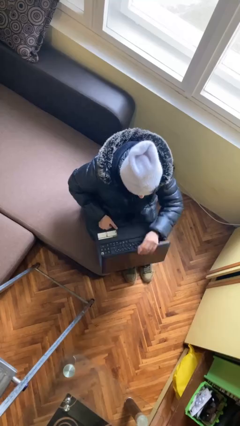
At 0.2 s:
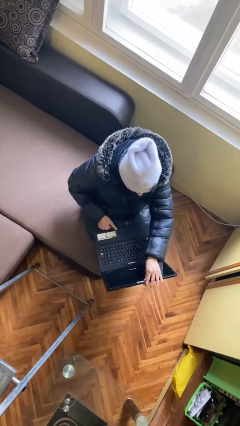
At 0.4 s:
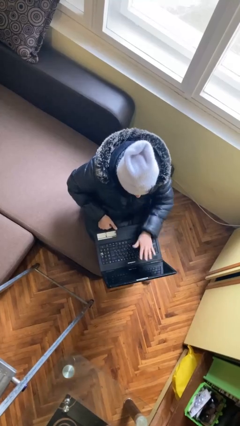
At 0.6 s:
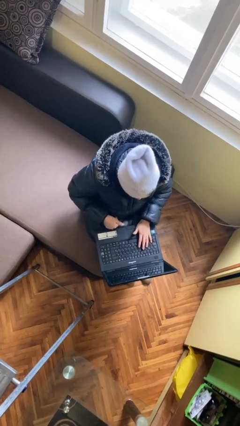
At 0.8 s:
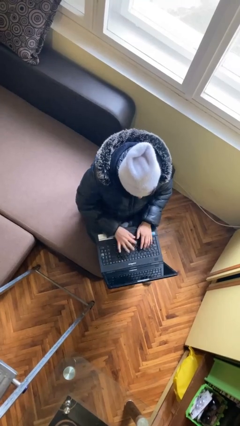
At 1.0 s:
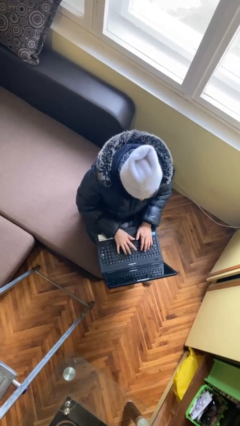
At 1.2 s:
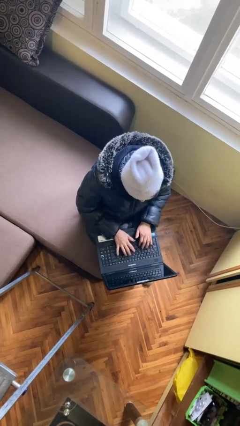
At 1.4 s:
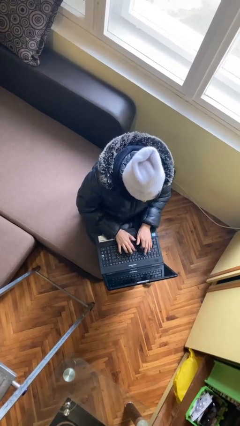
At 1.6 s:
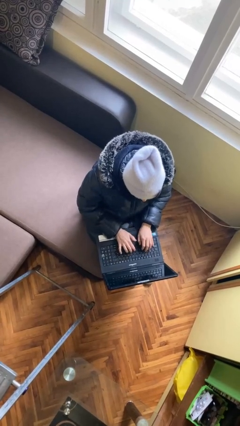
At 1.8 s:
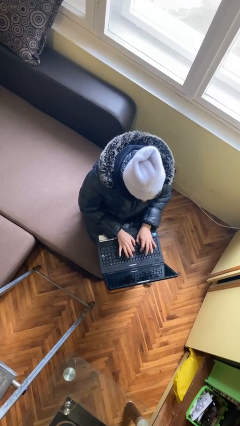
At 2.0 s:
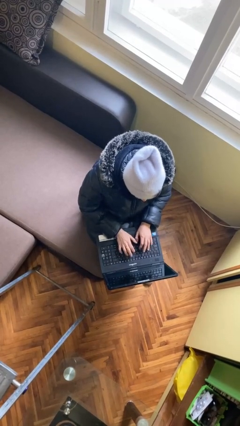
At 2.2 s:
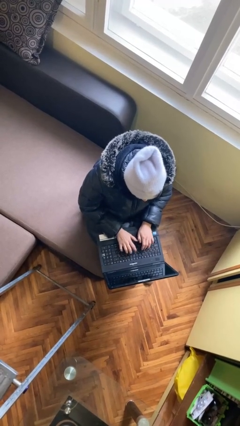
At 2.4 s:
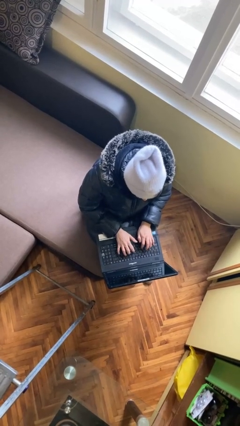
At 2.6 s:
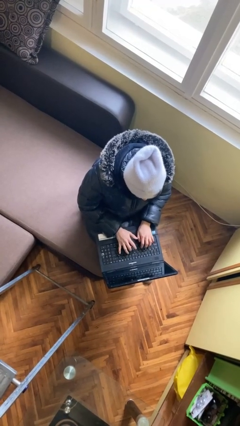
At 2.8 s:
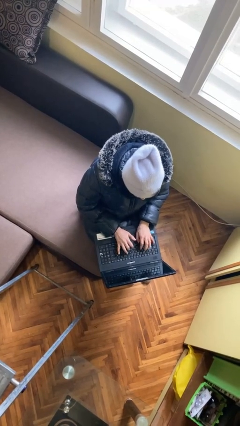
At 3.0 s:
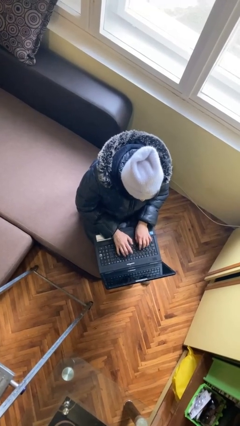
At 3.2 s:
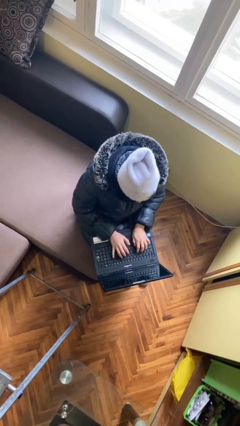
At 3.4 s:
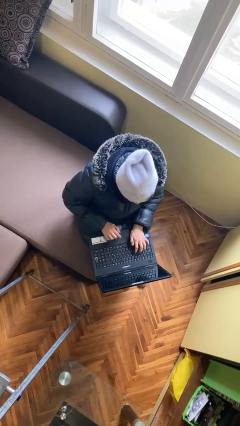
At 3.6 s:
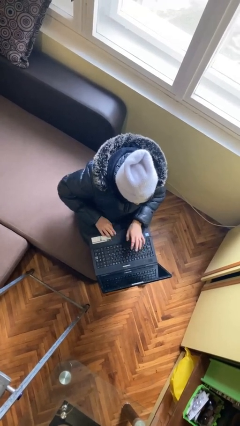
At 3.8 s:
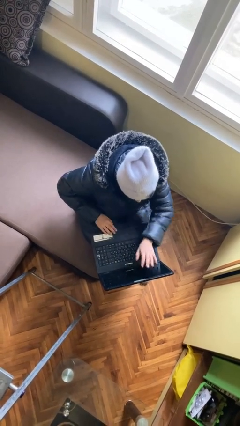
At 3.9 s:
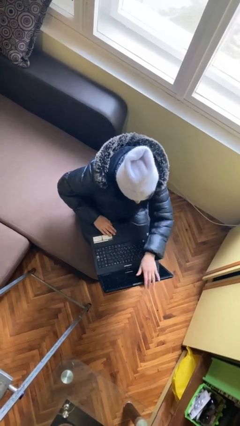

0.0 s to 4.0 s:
person interacts with laptop

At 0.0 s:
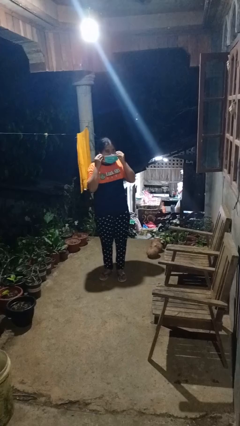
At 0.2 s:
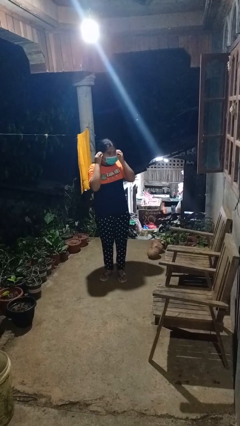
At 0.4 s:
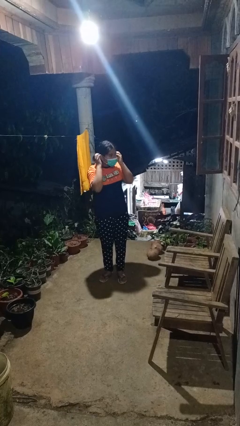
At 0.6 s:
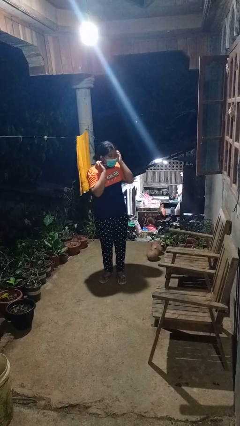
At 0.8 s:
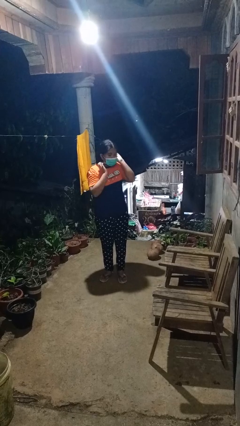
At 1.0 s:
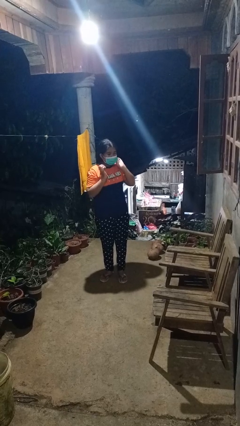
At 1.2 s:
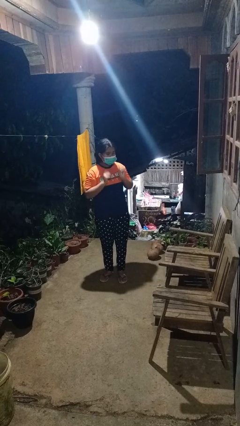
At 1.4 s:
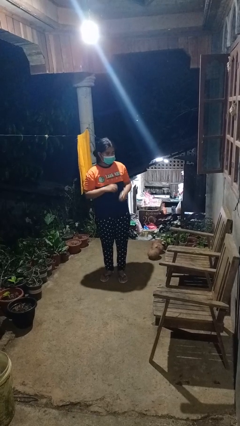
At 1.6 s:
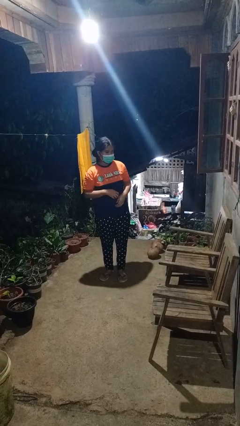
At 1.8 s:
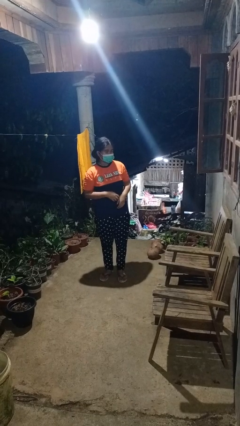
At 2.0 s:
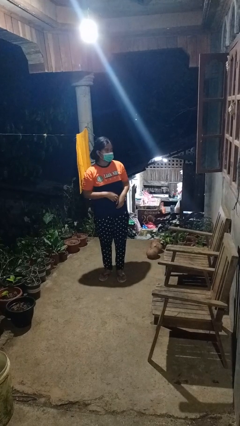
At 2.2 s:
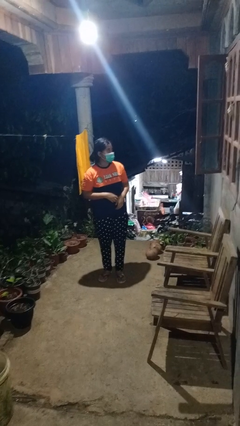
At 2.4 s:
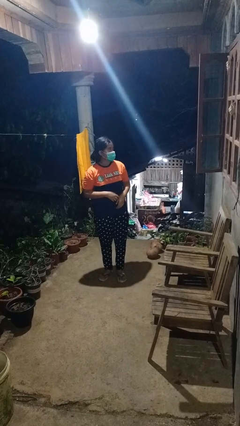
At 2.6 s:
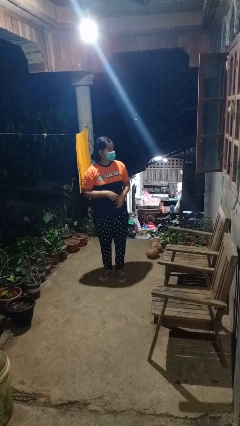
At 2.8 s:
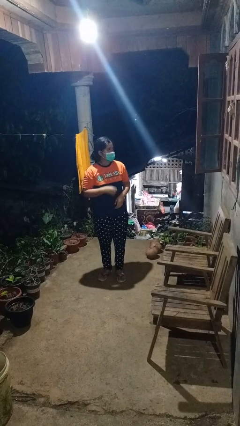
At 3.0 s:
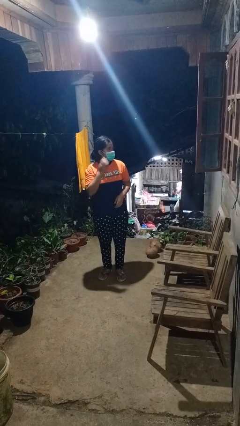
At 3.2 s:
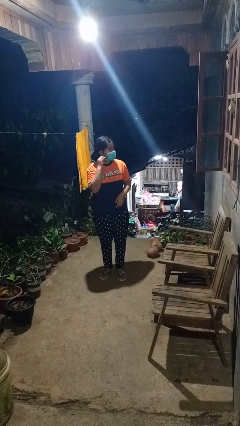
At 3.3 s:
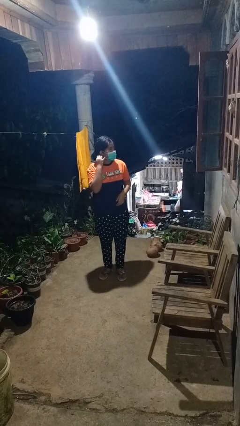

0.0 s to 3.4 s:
person puts on facemask

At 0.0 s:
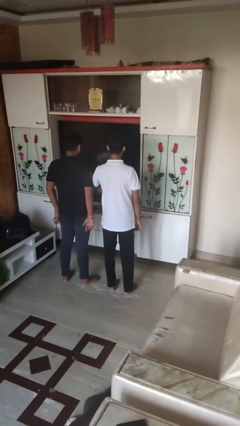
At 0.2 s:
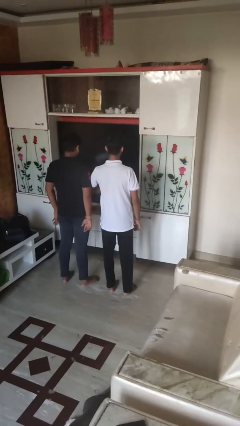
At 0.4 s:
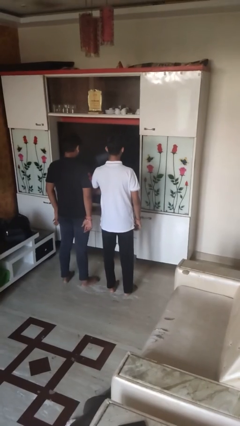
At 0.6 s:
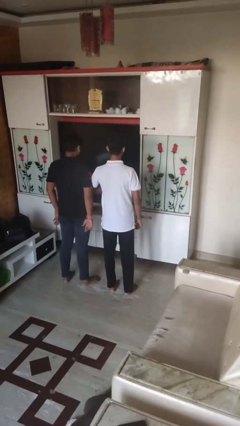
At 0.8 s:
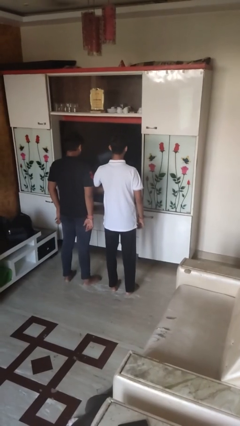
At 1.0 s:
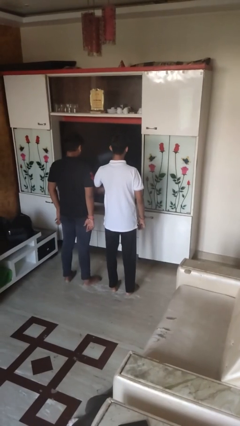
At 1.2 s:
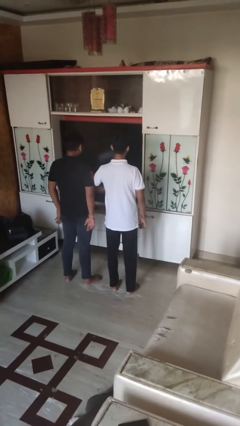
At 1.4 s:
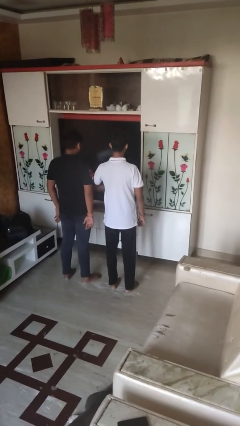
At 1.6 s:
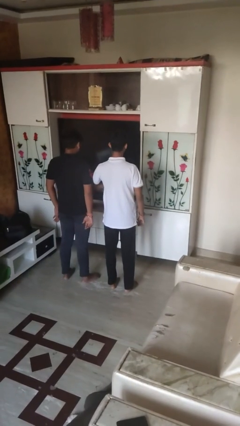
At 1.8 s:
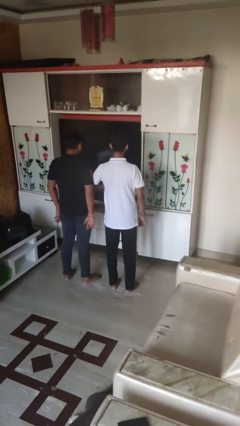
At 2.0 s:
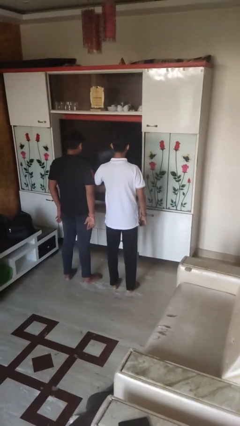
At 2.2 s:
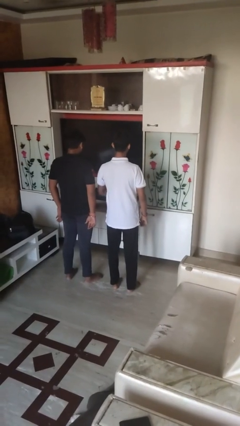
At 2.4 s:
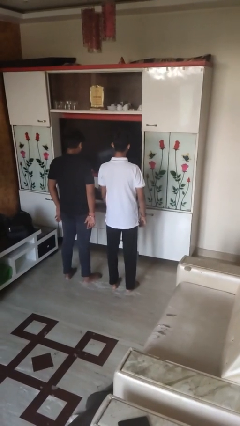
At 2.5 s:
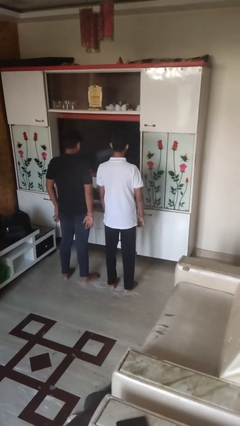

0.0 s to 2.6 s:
person nudges person with elbow

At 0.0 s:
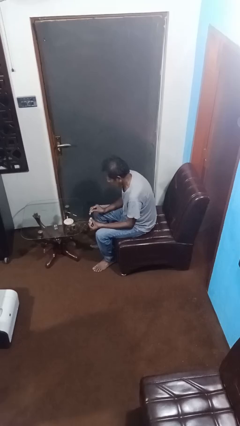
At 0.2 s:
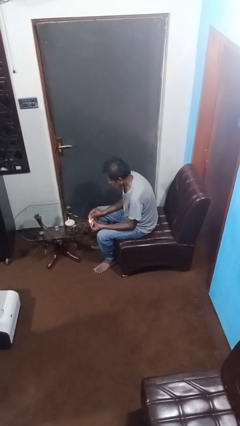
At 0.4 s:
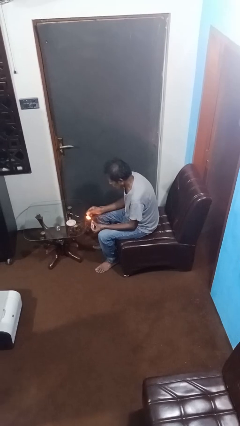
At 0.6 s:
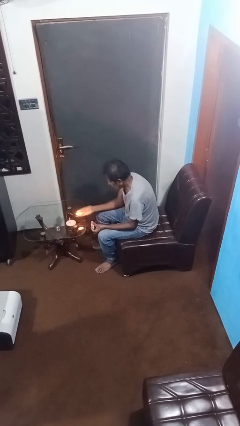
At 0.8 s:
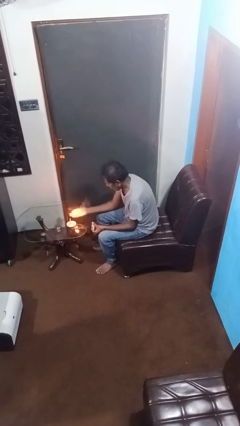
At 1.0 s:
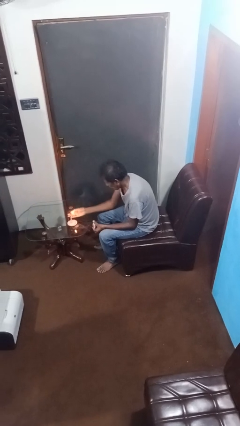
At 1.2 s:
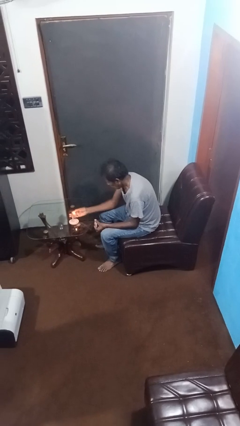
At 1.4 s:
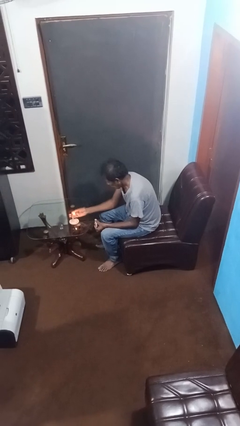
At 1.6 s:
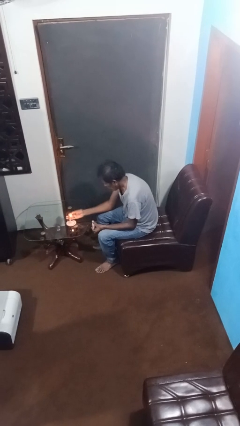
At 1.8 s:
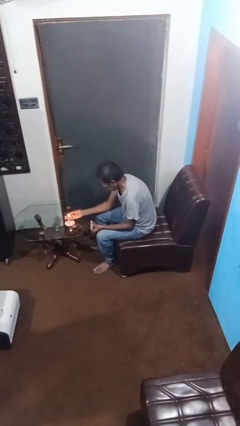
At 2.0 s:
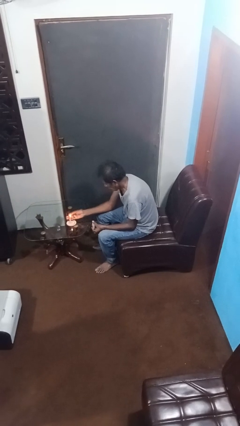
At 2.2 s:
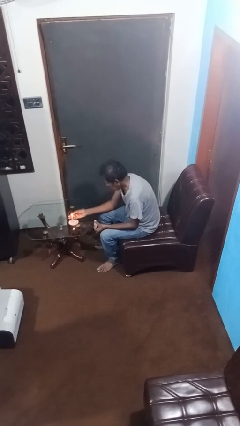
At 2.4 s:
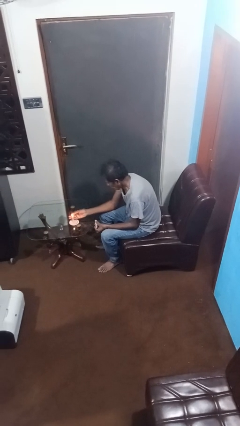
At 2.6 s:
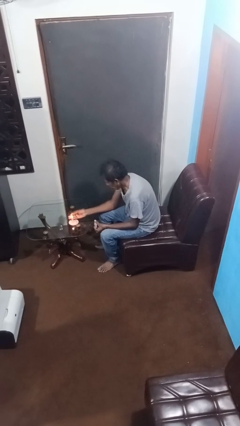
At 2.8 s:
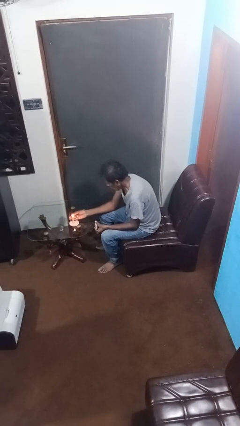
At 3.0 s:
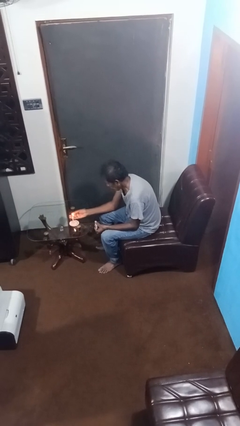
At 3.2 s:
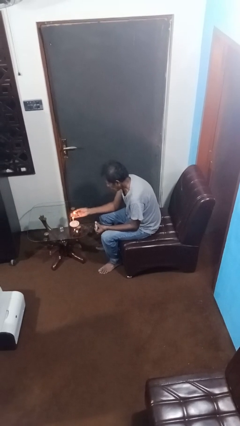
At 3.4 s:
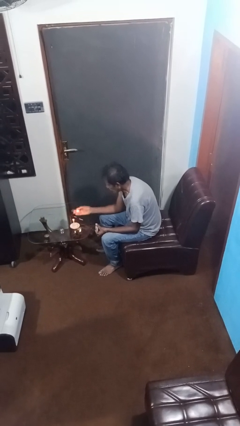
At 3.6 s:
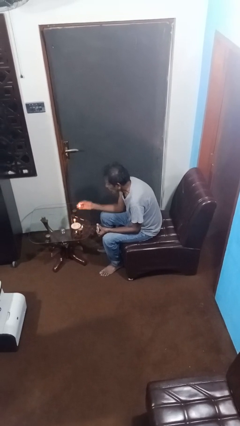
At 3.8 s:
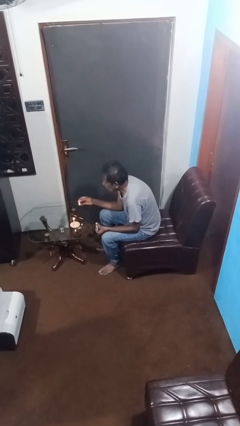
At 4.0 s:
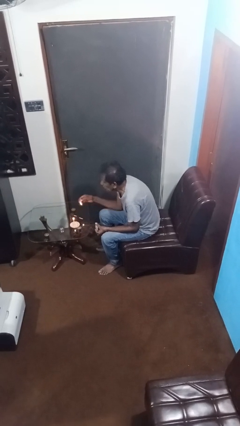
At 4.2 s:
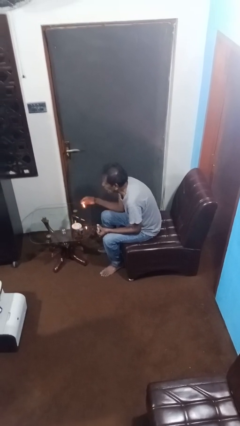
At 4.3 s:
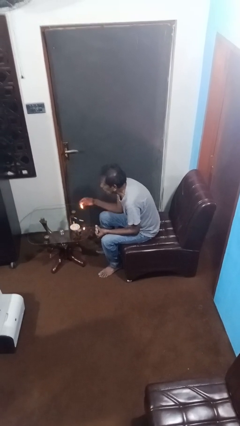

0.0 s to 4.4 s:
person lights candle

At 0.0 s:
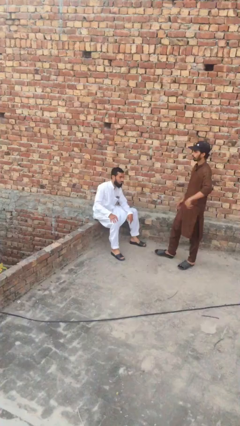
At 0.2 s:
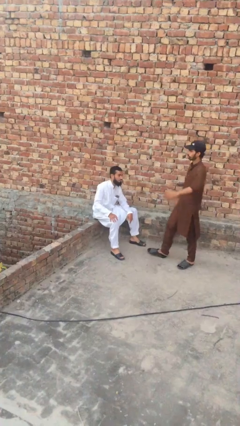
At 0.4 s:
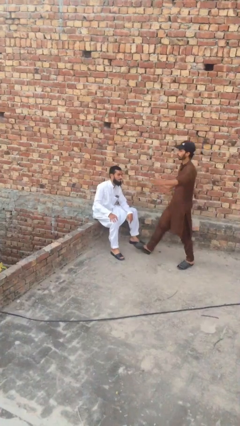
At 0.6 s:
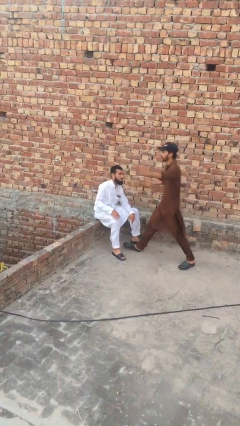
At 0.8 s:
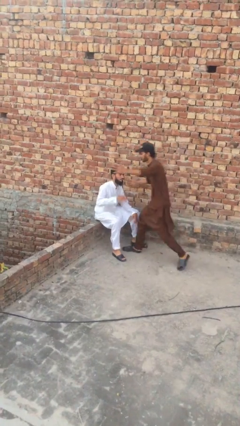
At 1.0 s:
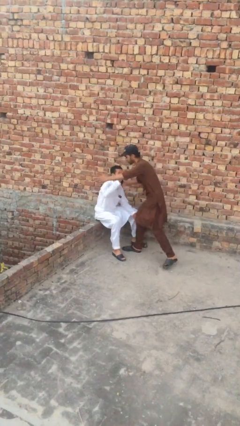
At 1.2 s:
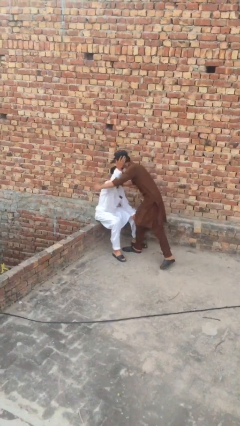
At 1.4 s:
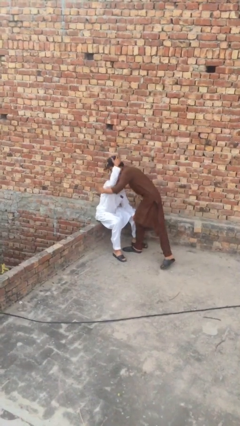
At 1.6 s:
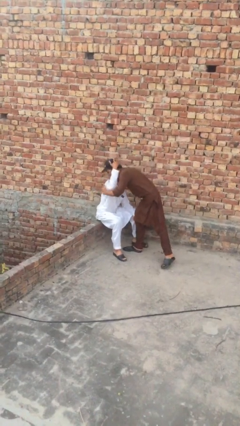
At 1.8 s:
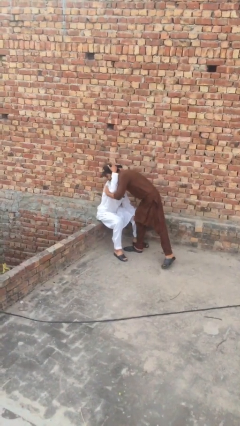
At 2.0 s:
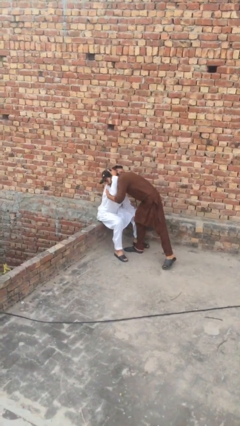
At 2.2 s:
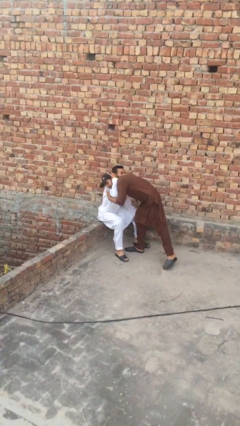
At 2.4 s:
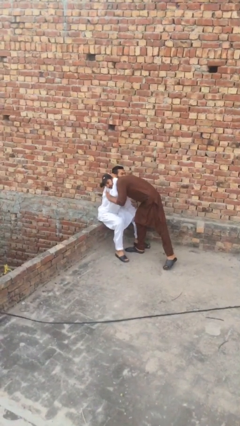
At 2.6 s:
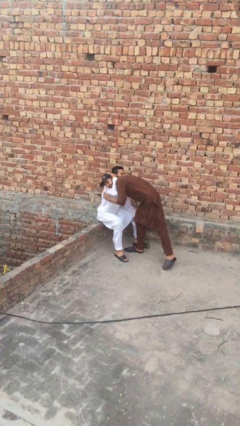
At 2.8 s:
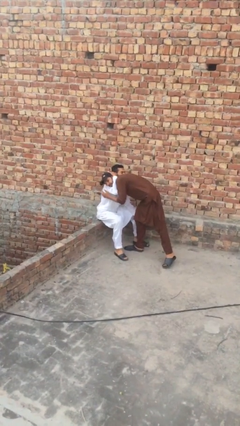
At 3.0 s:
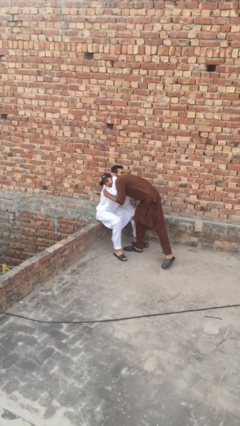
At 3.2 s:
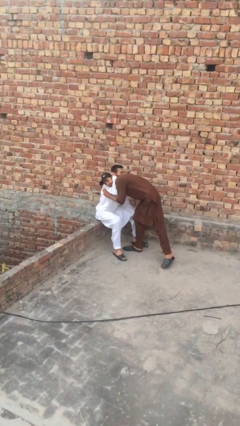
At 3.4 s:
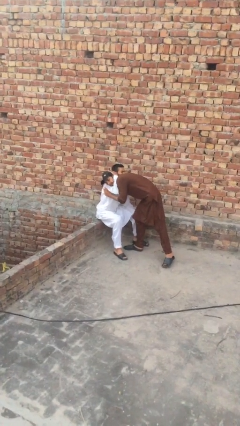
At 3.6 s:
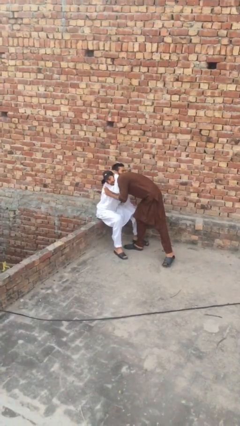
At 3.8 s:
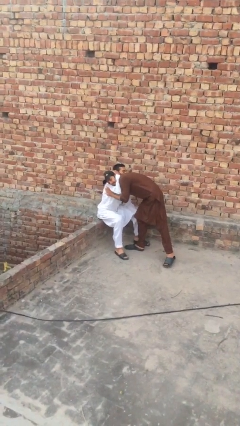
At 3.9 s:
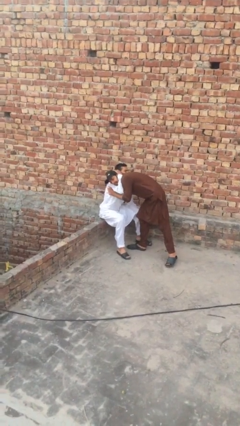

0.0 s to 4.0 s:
person embraces person
